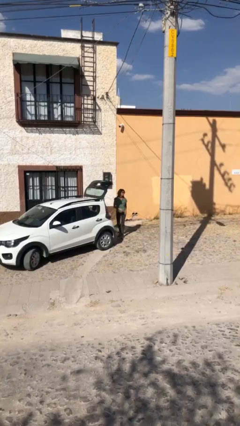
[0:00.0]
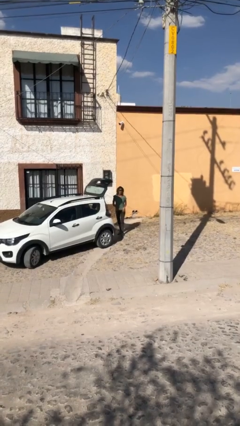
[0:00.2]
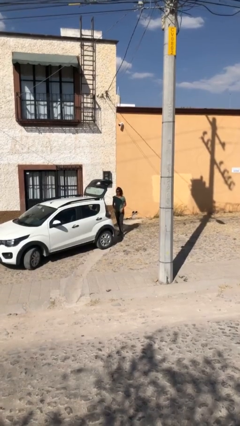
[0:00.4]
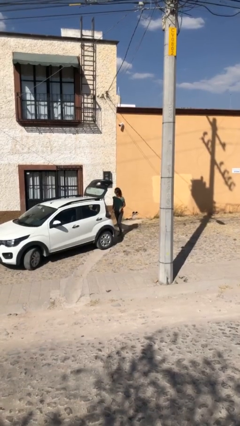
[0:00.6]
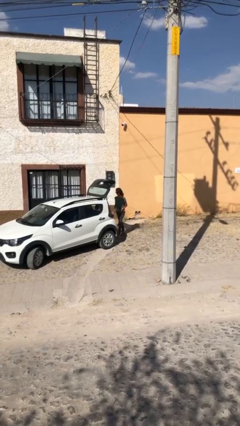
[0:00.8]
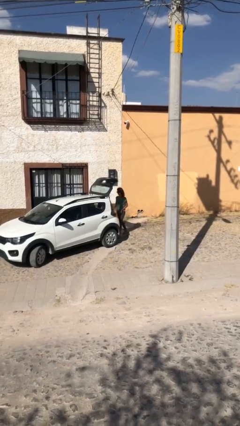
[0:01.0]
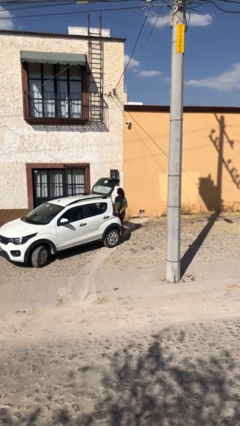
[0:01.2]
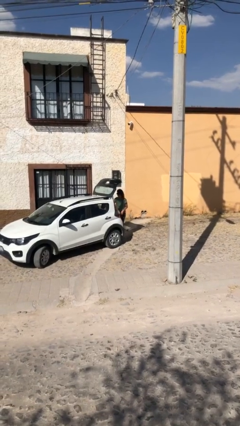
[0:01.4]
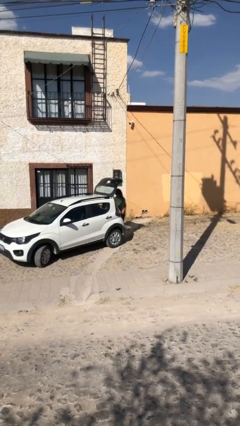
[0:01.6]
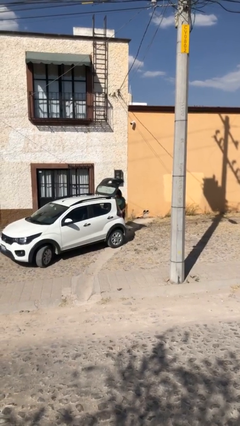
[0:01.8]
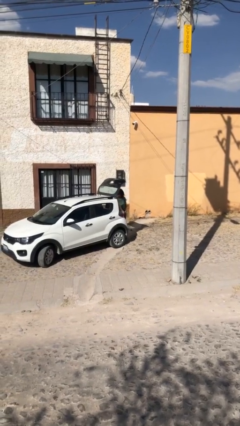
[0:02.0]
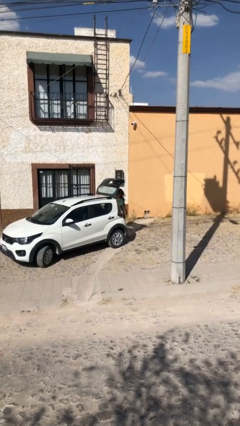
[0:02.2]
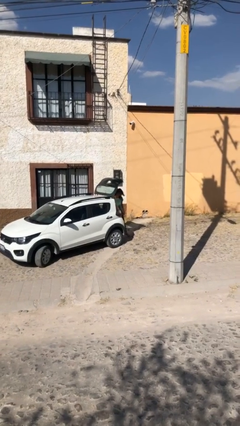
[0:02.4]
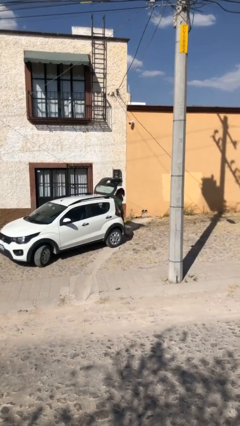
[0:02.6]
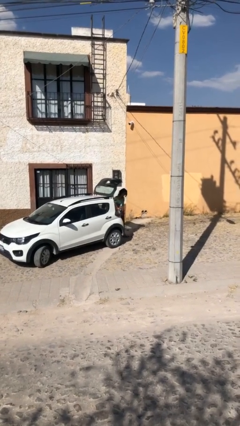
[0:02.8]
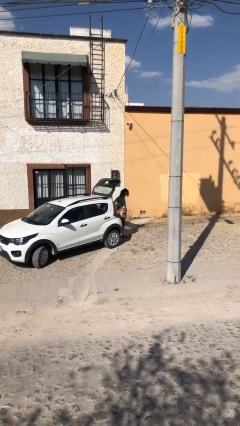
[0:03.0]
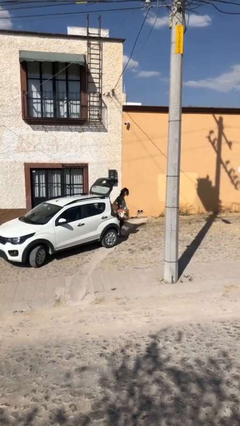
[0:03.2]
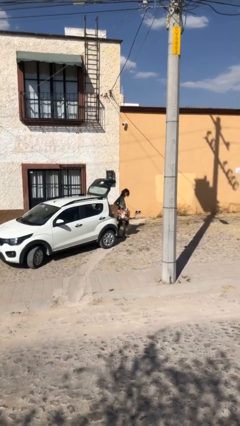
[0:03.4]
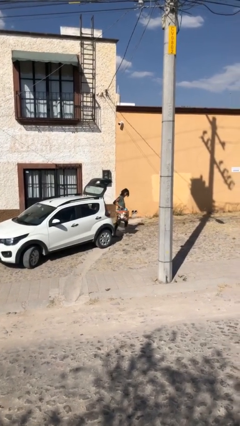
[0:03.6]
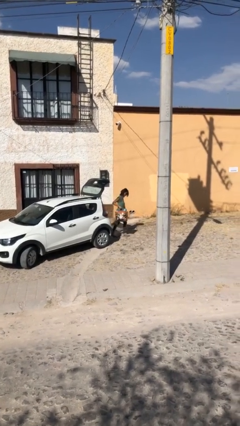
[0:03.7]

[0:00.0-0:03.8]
person unloads car

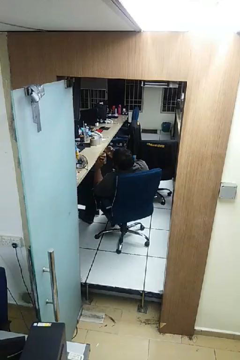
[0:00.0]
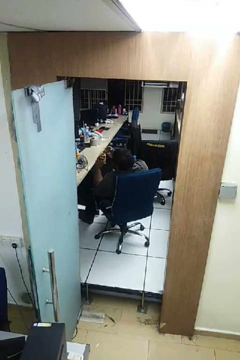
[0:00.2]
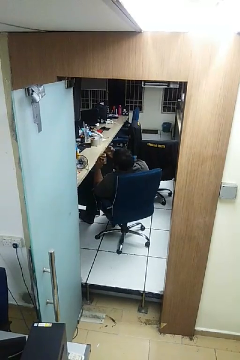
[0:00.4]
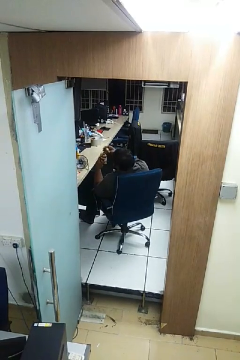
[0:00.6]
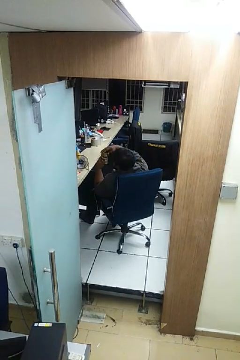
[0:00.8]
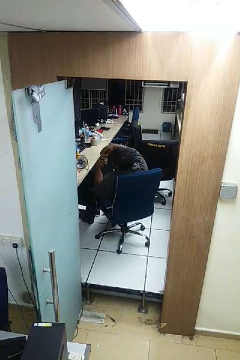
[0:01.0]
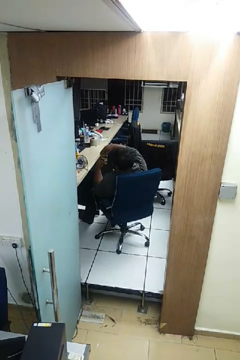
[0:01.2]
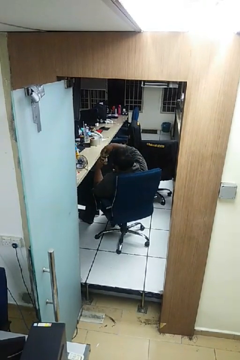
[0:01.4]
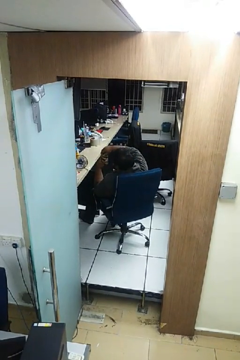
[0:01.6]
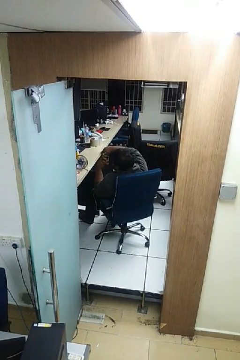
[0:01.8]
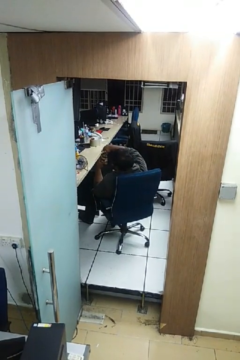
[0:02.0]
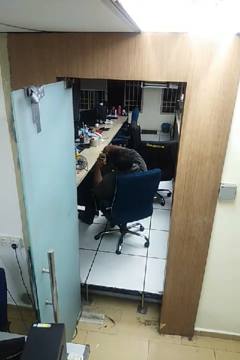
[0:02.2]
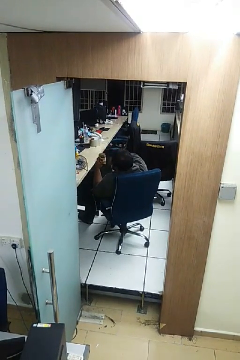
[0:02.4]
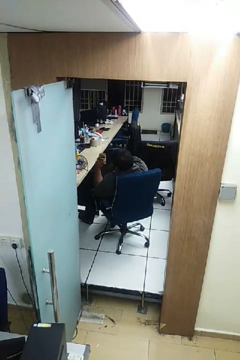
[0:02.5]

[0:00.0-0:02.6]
person closes jar

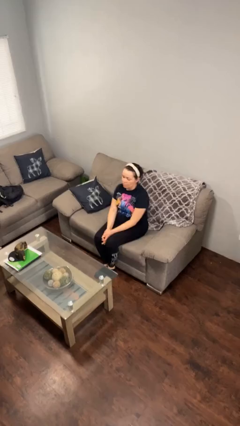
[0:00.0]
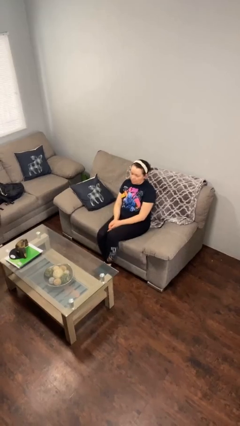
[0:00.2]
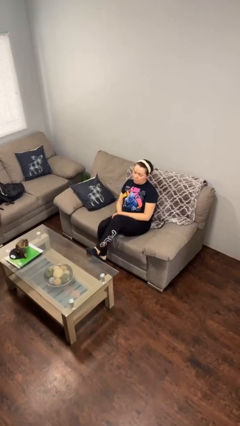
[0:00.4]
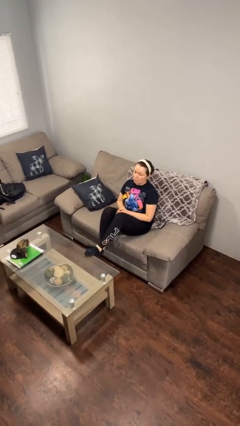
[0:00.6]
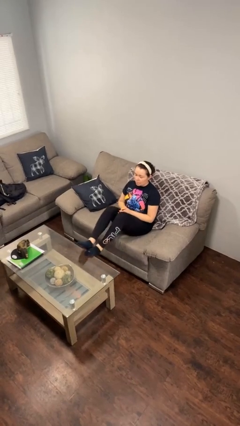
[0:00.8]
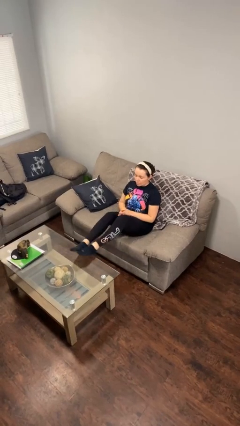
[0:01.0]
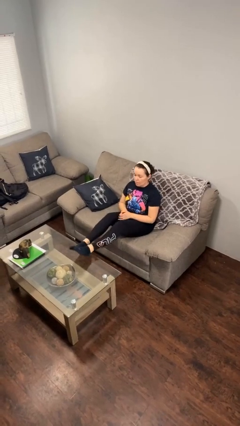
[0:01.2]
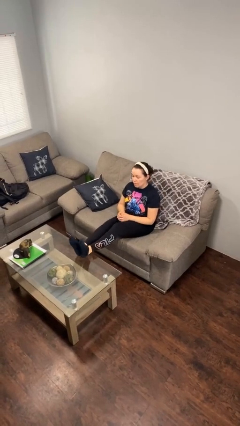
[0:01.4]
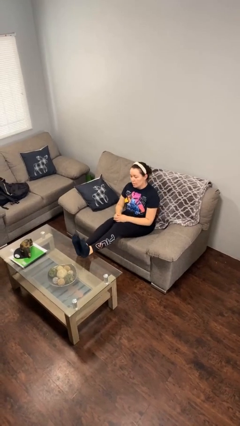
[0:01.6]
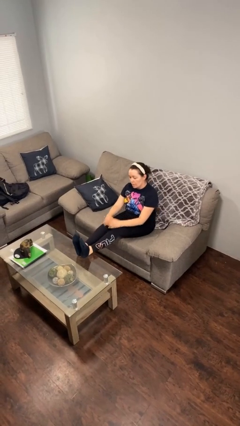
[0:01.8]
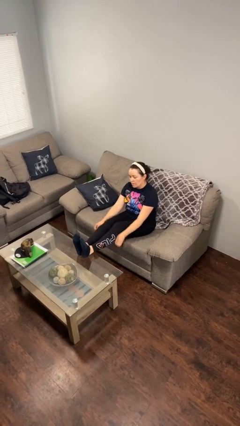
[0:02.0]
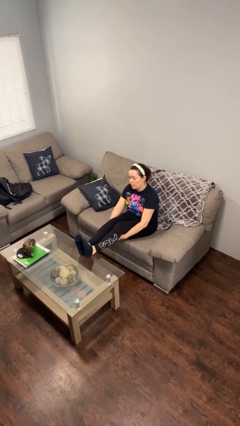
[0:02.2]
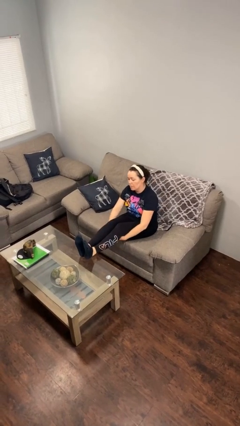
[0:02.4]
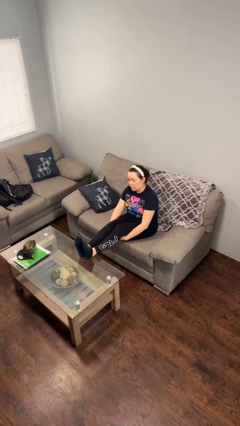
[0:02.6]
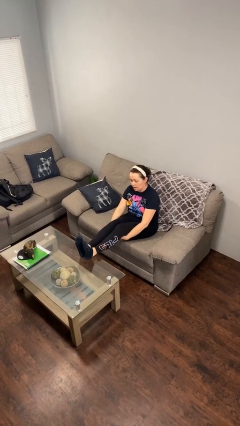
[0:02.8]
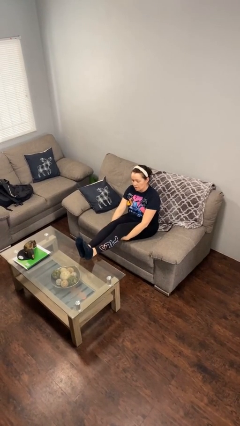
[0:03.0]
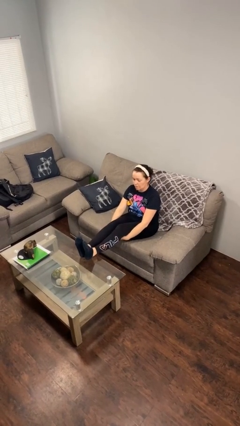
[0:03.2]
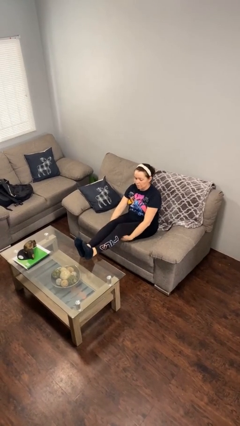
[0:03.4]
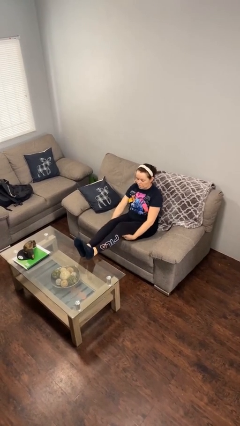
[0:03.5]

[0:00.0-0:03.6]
person puts feet up

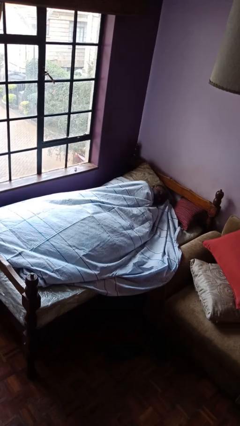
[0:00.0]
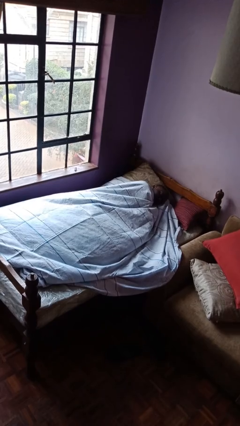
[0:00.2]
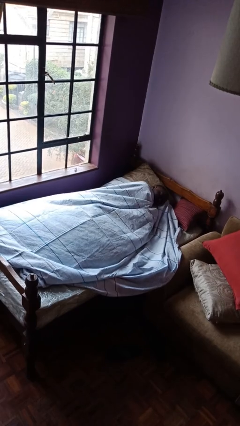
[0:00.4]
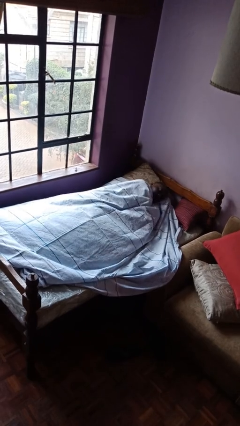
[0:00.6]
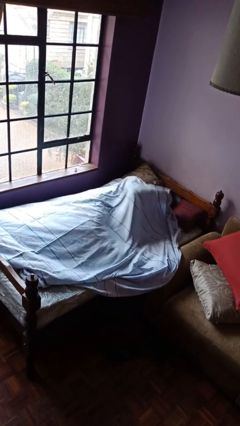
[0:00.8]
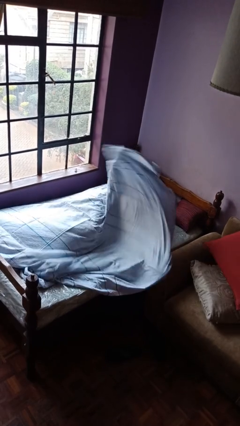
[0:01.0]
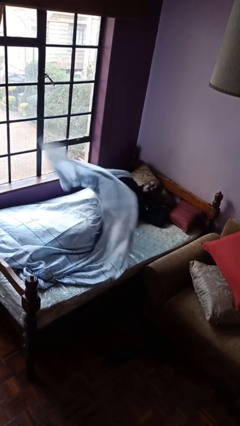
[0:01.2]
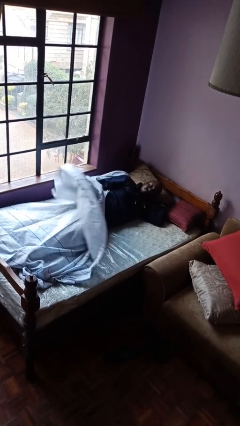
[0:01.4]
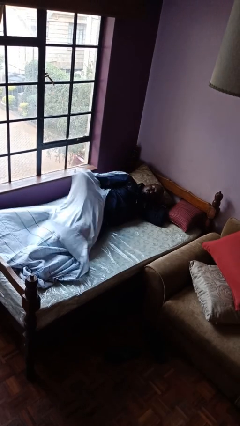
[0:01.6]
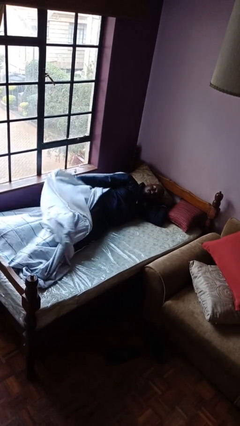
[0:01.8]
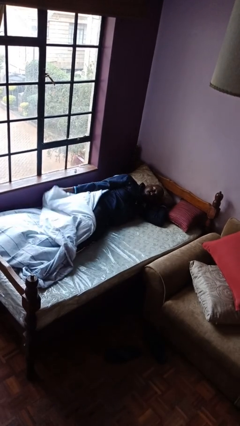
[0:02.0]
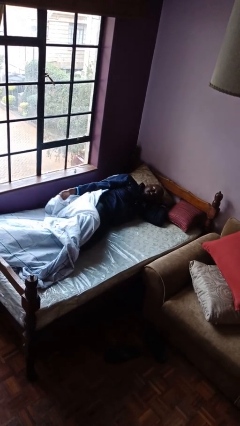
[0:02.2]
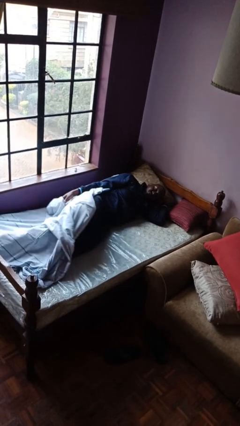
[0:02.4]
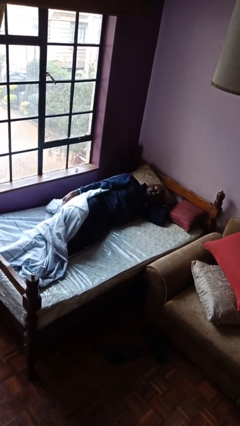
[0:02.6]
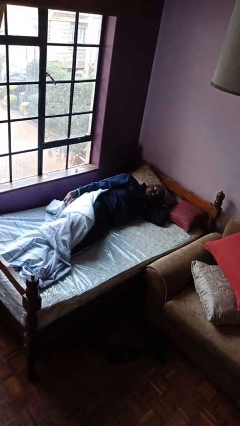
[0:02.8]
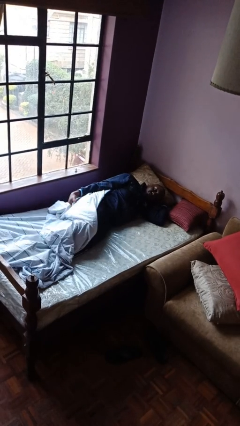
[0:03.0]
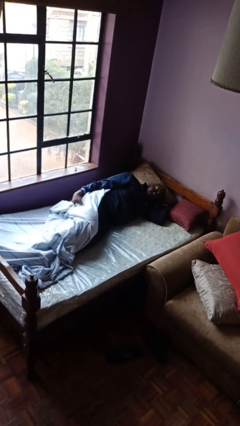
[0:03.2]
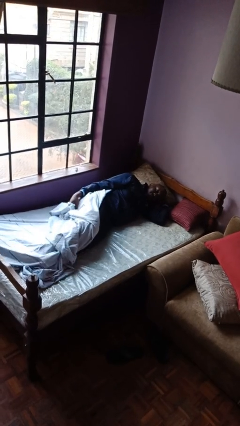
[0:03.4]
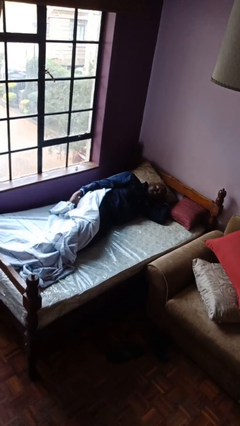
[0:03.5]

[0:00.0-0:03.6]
person uncovers with bedsheets

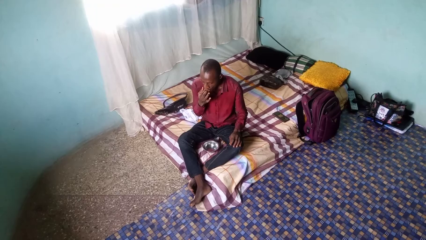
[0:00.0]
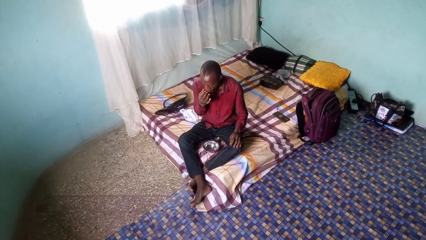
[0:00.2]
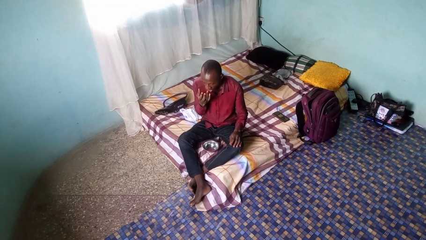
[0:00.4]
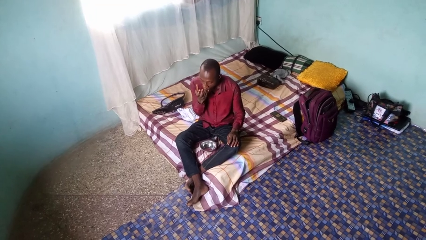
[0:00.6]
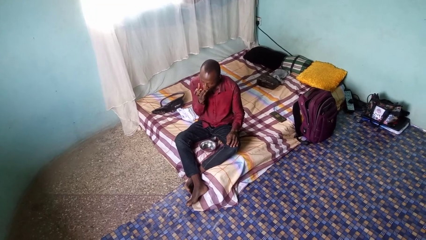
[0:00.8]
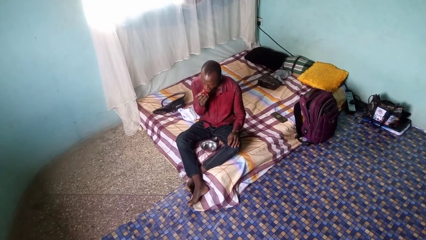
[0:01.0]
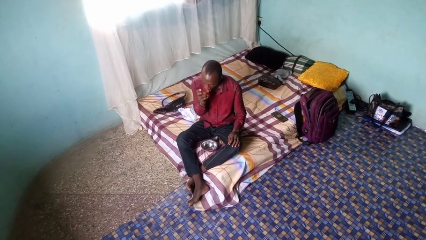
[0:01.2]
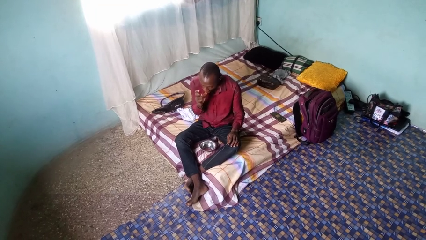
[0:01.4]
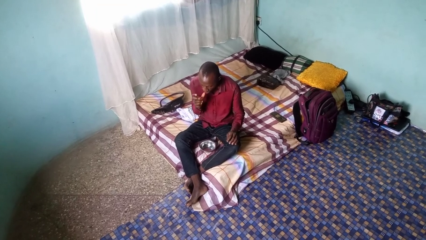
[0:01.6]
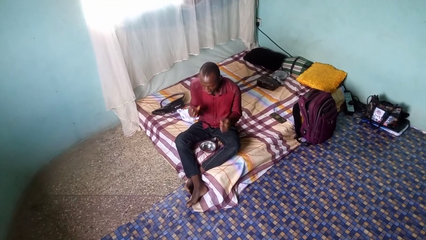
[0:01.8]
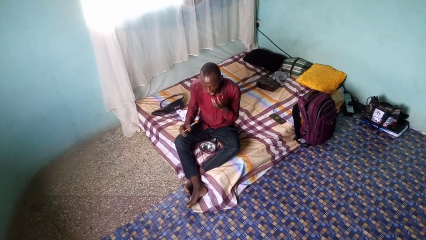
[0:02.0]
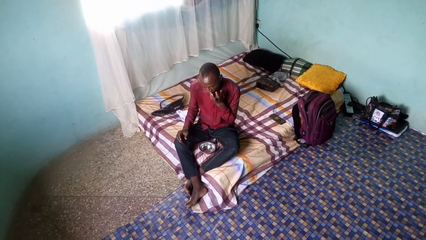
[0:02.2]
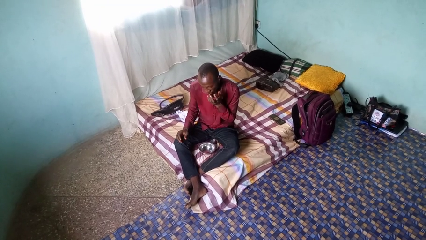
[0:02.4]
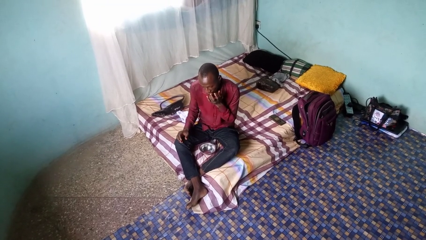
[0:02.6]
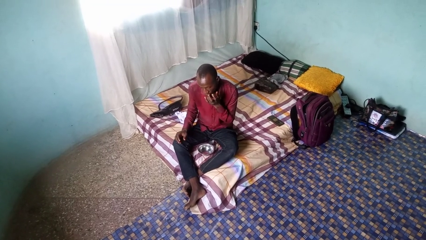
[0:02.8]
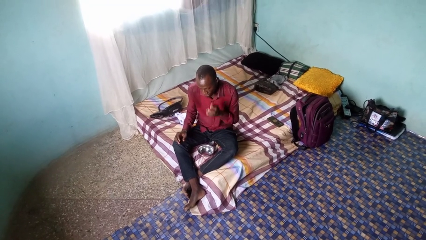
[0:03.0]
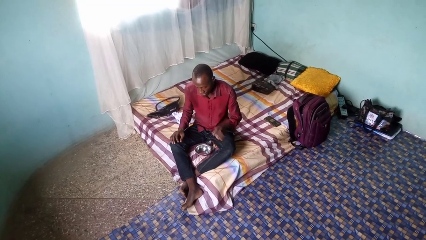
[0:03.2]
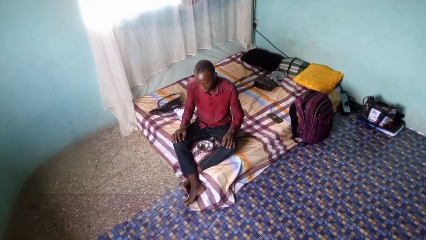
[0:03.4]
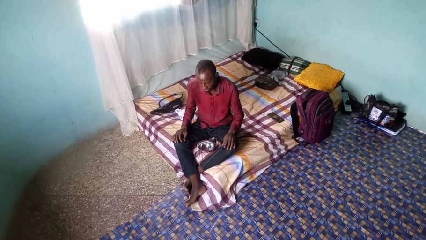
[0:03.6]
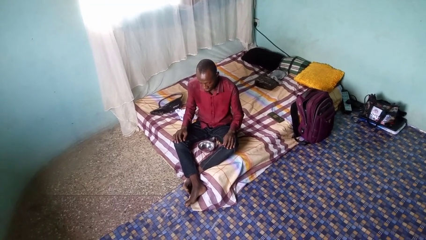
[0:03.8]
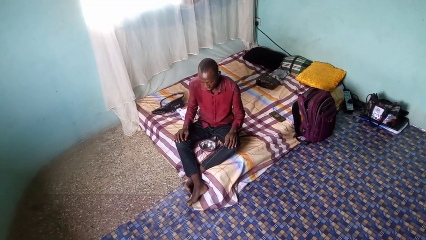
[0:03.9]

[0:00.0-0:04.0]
person licks fingers

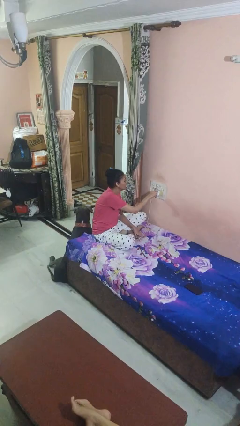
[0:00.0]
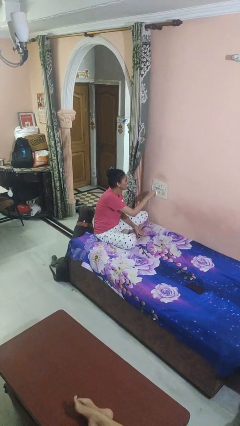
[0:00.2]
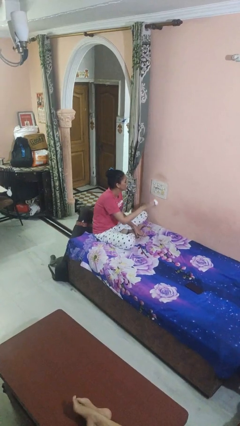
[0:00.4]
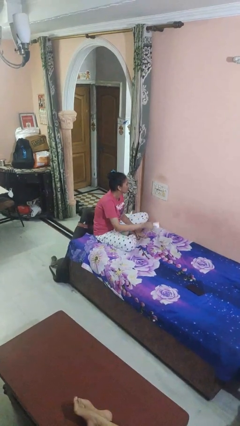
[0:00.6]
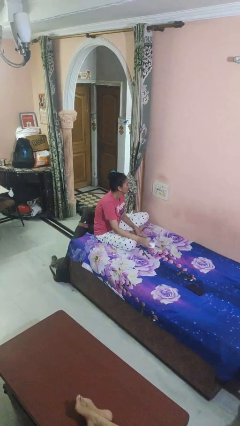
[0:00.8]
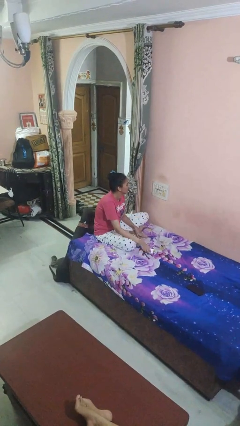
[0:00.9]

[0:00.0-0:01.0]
person unplugs from electrical socket
